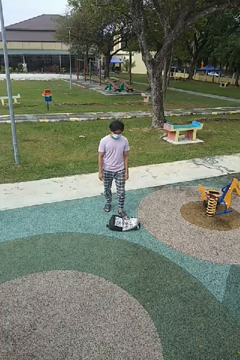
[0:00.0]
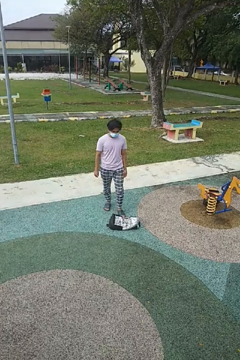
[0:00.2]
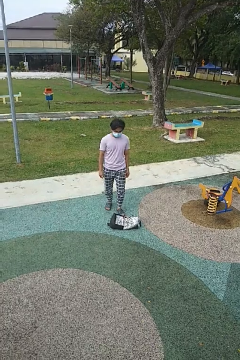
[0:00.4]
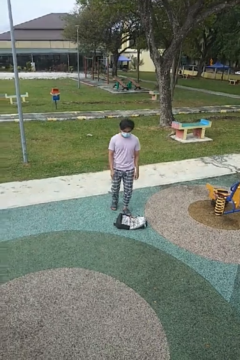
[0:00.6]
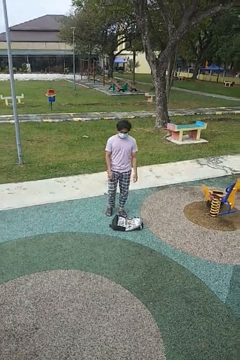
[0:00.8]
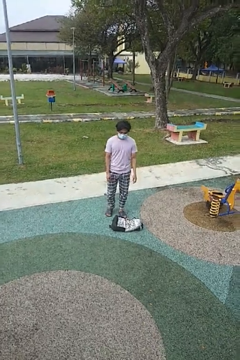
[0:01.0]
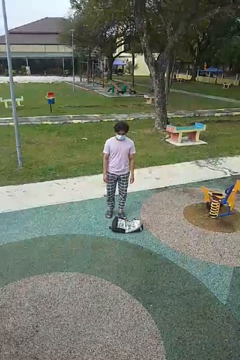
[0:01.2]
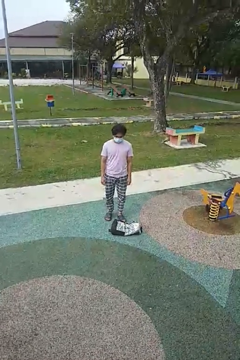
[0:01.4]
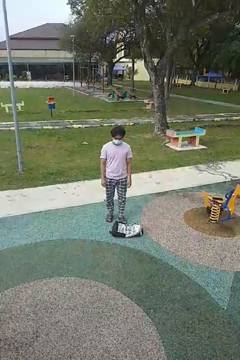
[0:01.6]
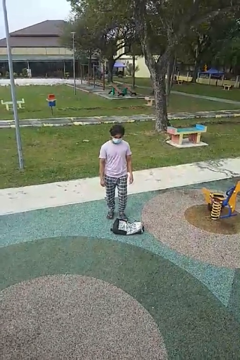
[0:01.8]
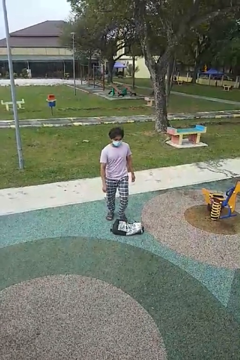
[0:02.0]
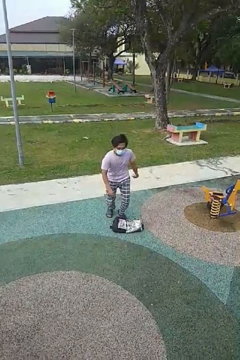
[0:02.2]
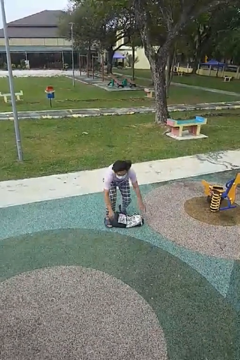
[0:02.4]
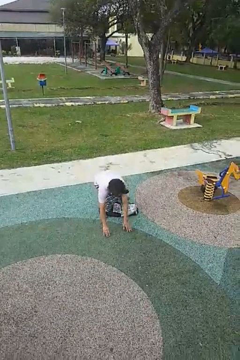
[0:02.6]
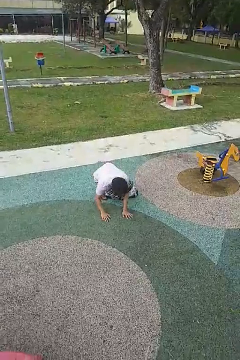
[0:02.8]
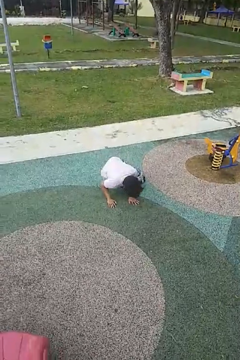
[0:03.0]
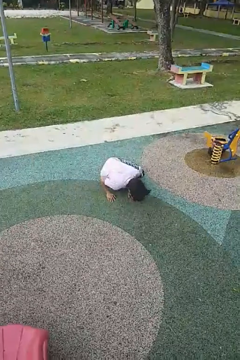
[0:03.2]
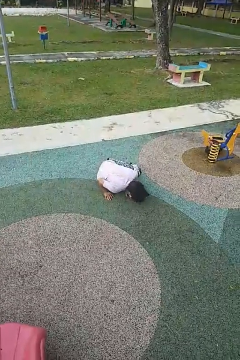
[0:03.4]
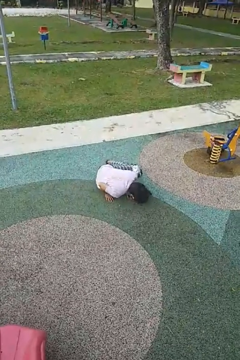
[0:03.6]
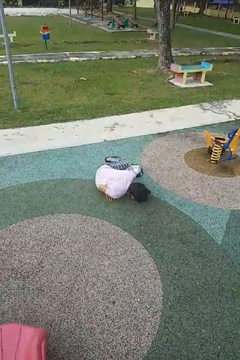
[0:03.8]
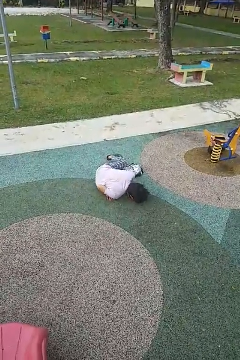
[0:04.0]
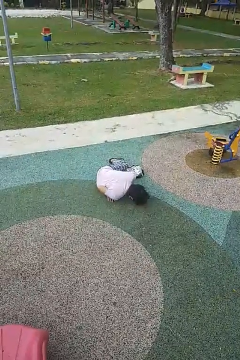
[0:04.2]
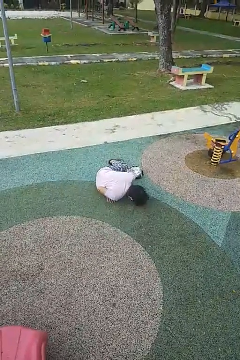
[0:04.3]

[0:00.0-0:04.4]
person trips on object on floor

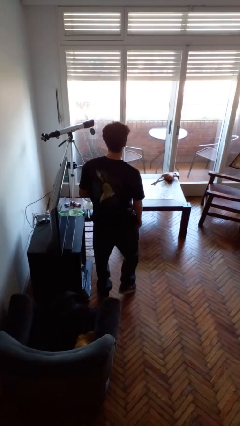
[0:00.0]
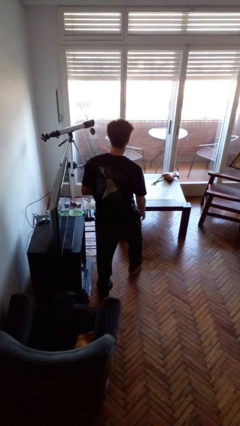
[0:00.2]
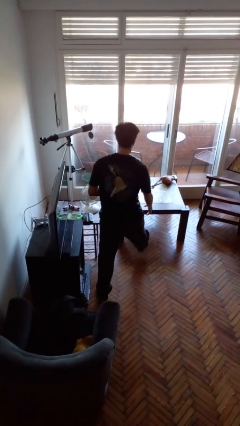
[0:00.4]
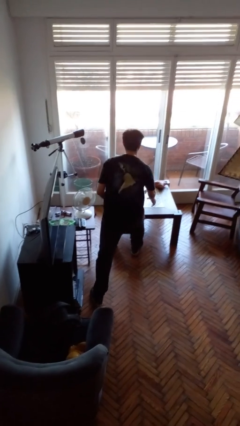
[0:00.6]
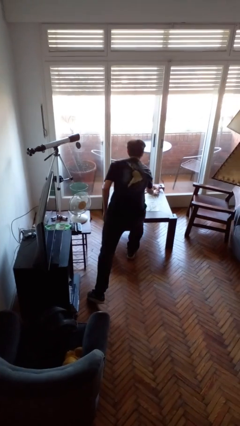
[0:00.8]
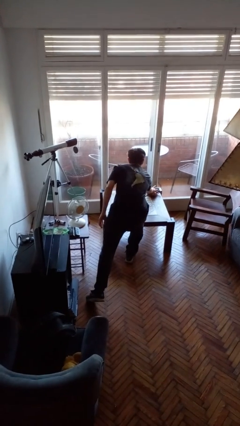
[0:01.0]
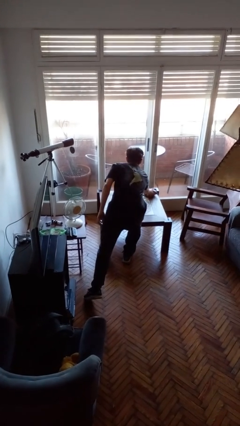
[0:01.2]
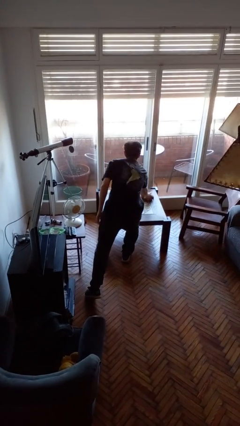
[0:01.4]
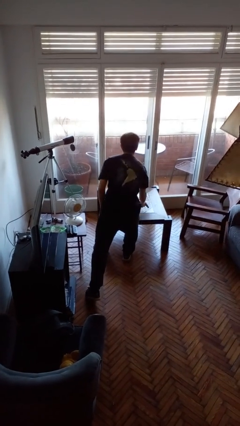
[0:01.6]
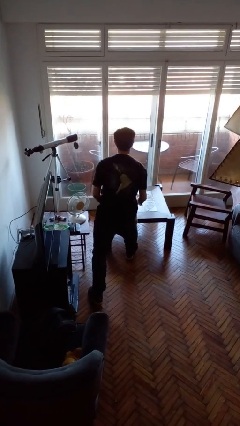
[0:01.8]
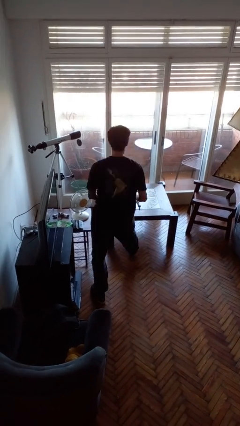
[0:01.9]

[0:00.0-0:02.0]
person picks up object from table

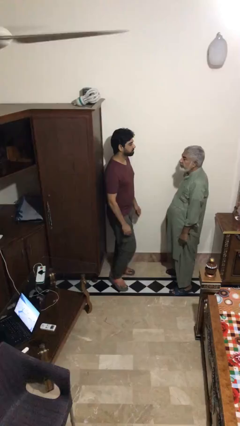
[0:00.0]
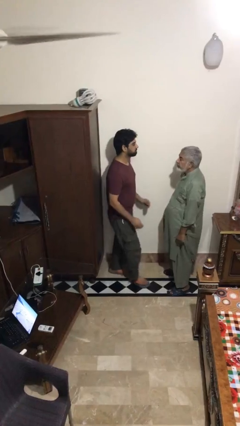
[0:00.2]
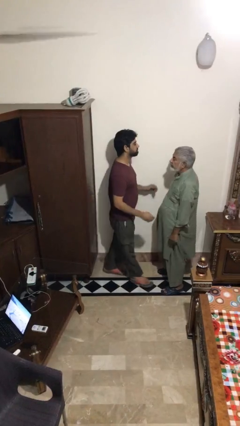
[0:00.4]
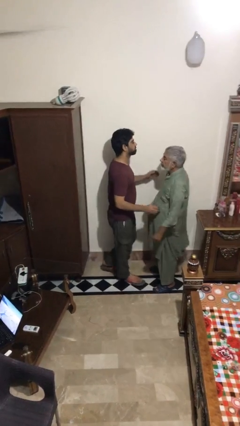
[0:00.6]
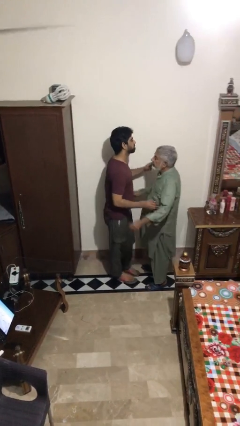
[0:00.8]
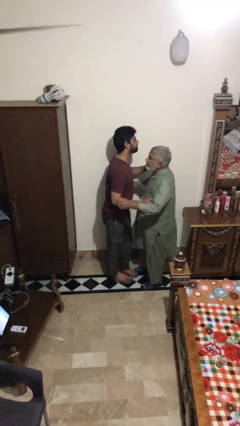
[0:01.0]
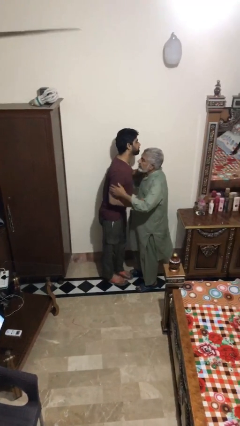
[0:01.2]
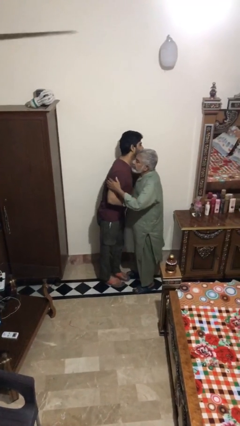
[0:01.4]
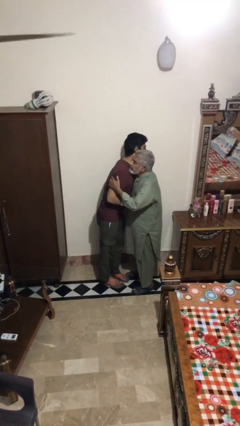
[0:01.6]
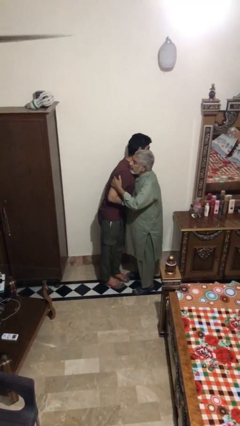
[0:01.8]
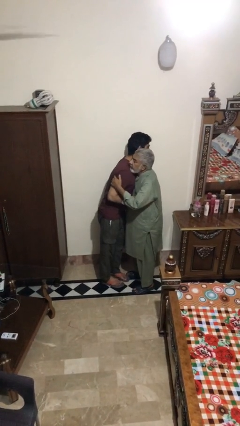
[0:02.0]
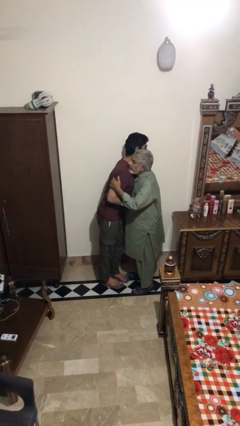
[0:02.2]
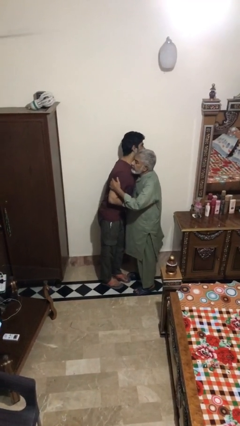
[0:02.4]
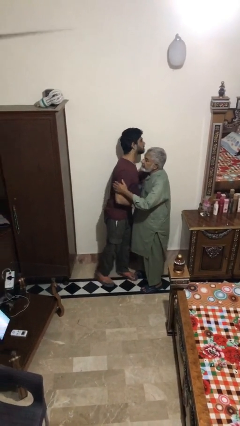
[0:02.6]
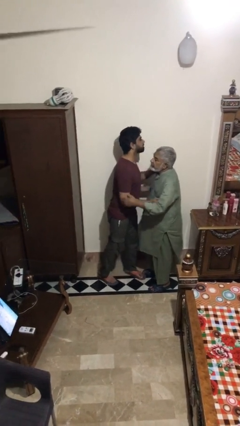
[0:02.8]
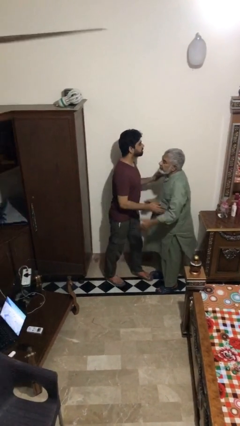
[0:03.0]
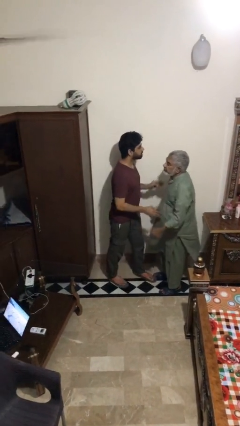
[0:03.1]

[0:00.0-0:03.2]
person embraces person

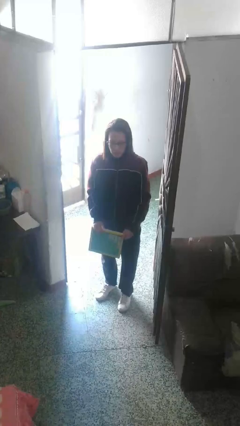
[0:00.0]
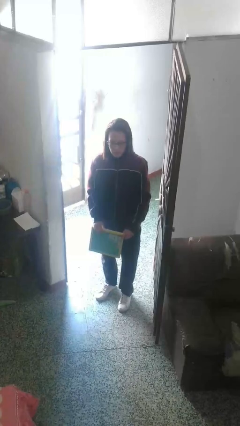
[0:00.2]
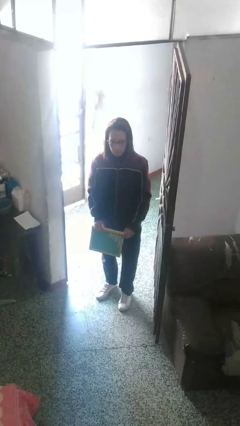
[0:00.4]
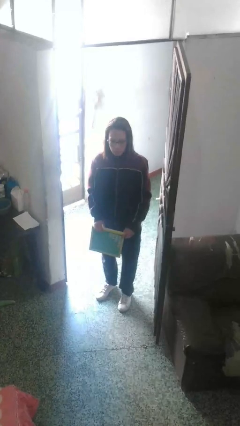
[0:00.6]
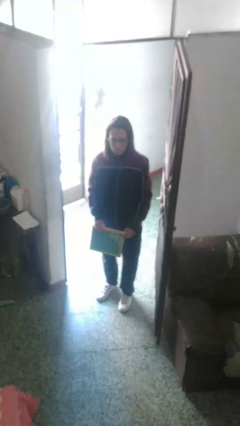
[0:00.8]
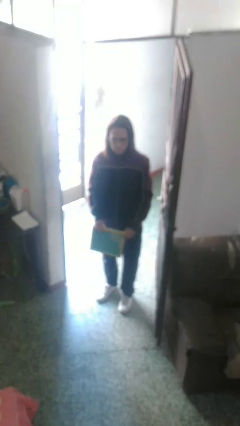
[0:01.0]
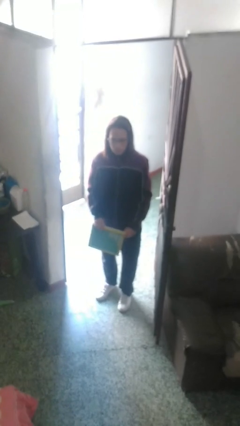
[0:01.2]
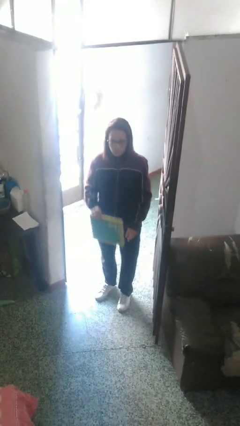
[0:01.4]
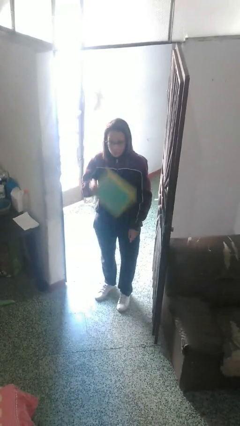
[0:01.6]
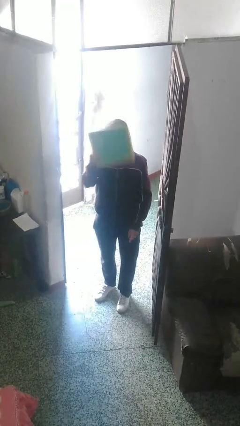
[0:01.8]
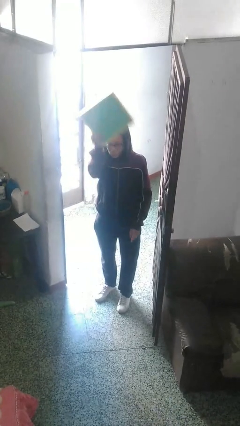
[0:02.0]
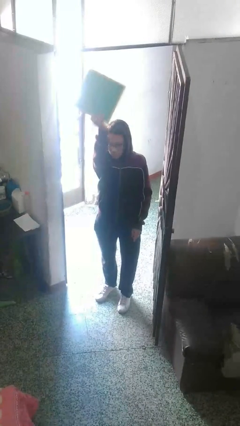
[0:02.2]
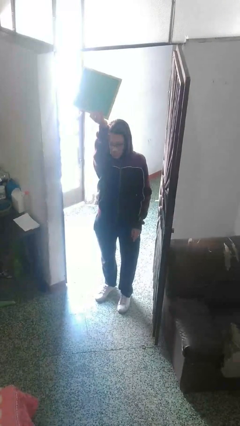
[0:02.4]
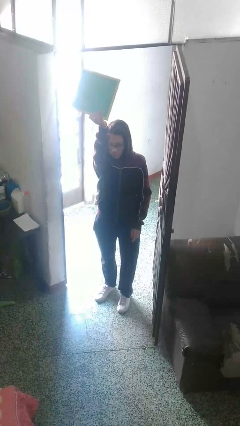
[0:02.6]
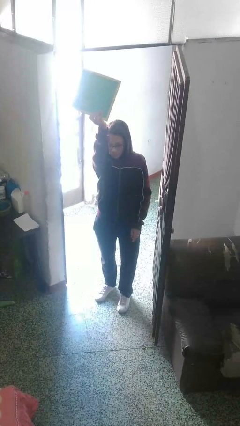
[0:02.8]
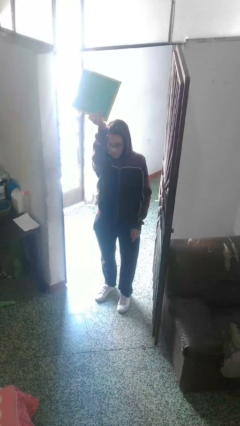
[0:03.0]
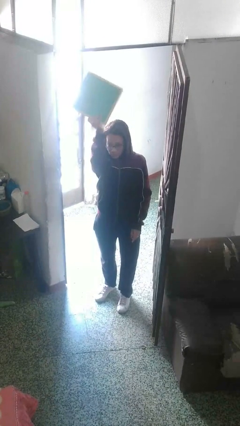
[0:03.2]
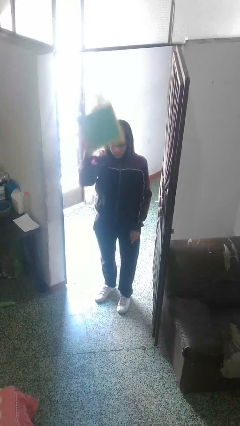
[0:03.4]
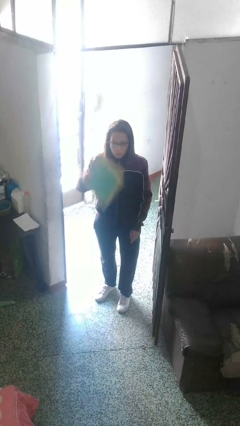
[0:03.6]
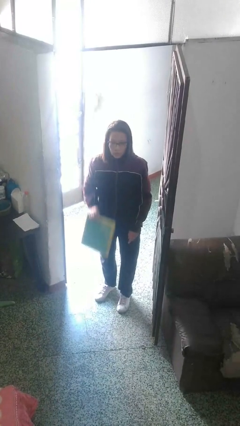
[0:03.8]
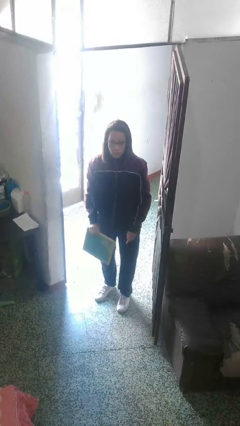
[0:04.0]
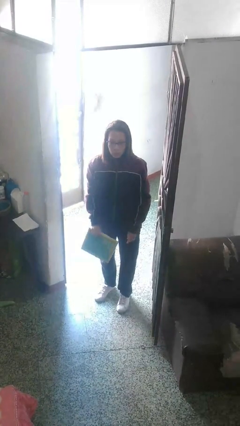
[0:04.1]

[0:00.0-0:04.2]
person holds object above head

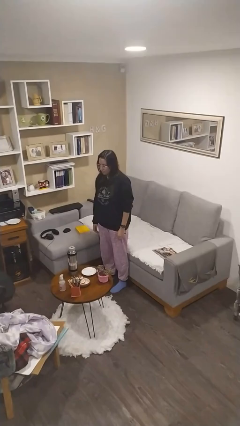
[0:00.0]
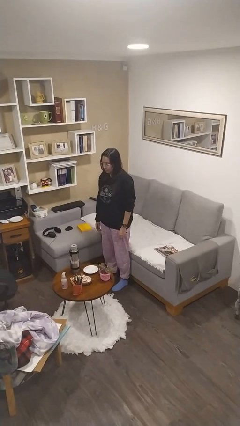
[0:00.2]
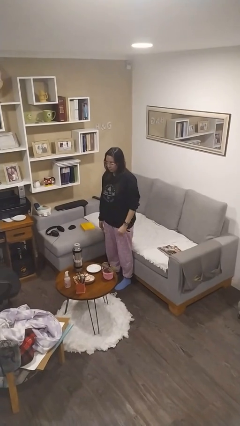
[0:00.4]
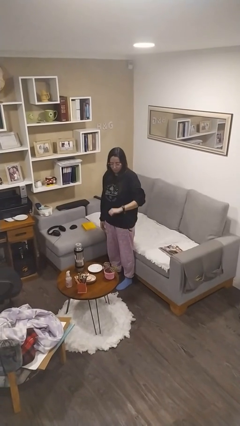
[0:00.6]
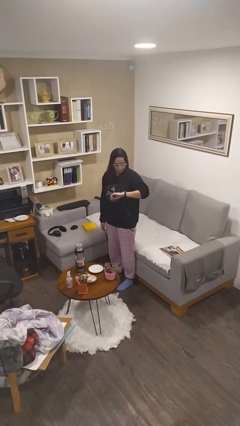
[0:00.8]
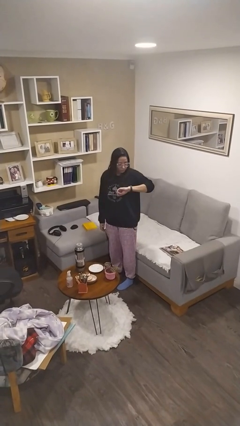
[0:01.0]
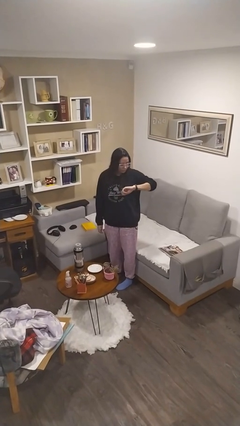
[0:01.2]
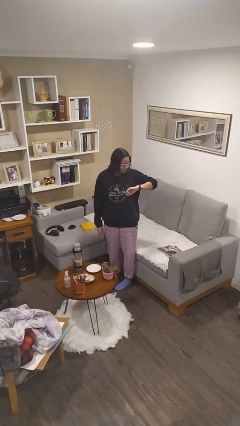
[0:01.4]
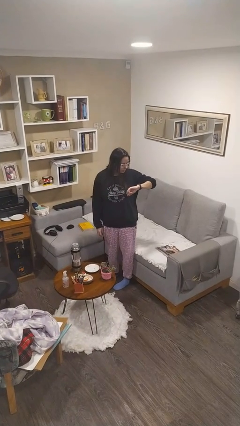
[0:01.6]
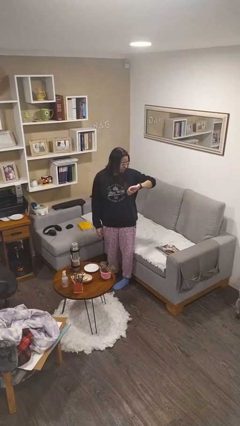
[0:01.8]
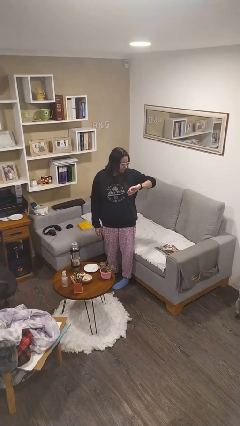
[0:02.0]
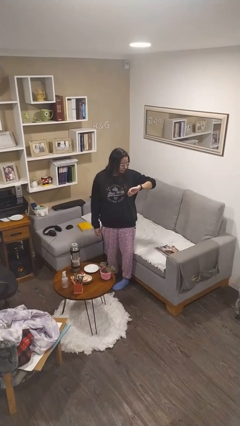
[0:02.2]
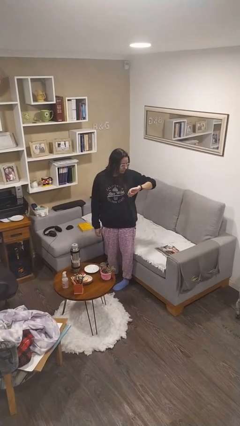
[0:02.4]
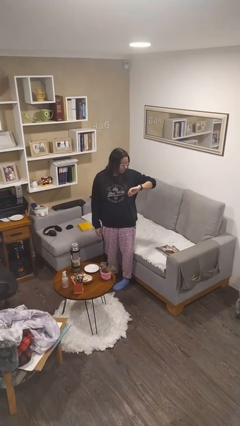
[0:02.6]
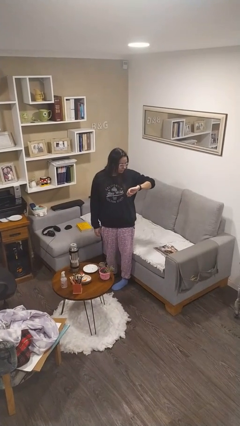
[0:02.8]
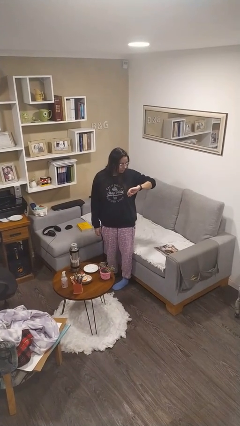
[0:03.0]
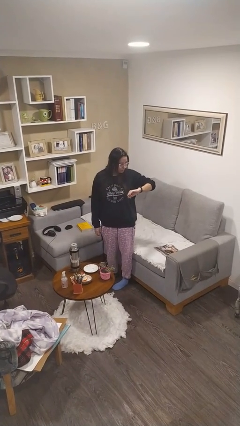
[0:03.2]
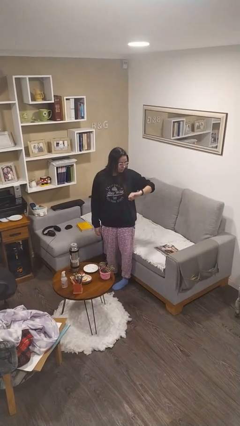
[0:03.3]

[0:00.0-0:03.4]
person looks at wristwatch

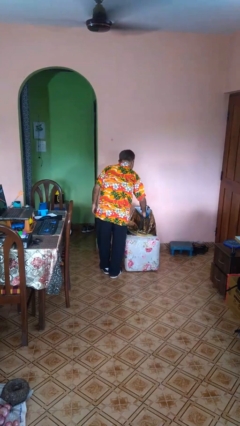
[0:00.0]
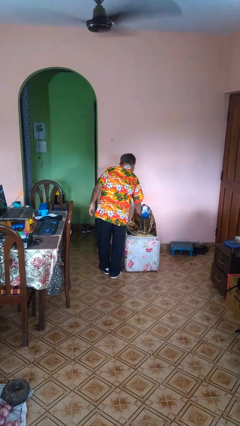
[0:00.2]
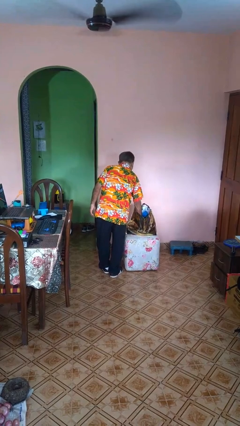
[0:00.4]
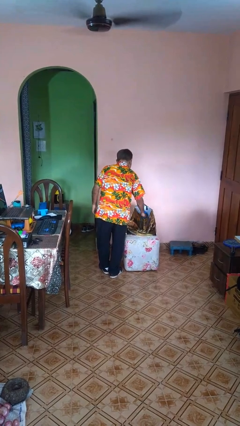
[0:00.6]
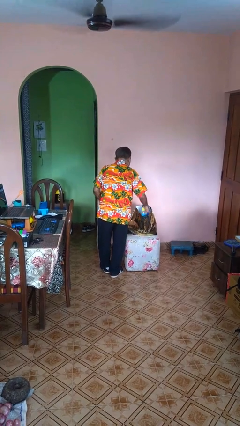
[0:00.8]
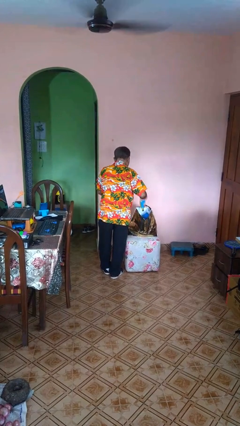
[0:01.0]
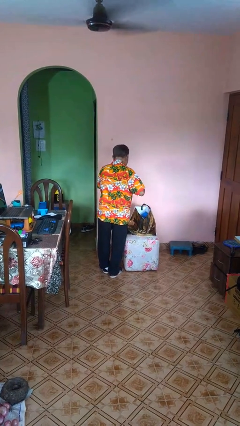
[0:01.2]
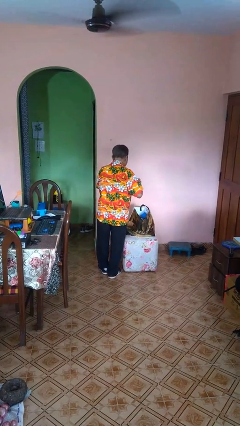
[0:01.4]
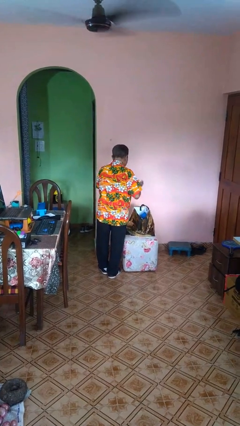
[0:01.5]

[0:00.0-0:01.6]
person takes object from bag
